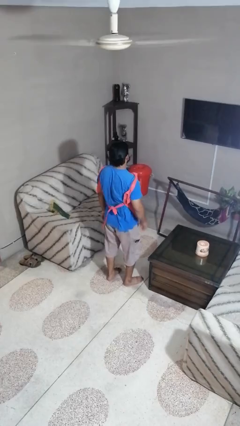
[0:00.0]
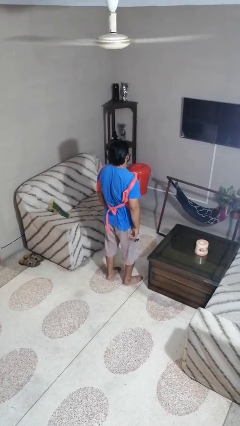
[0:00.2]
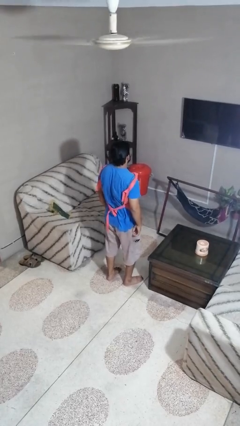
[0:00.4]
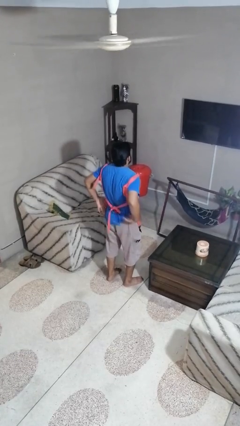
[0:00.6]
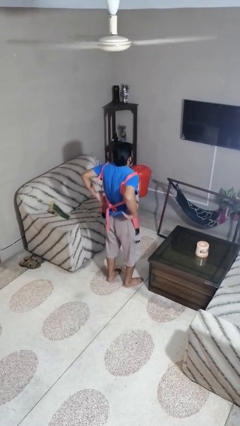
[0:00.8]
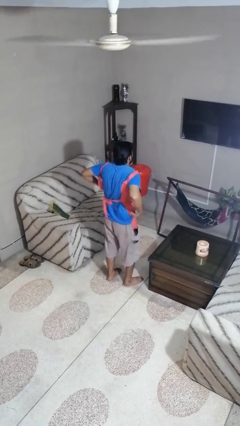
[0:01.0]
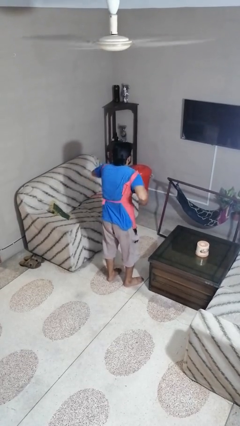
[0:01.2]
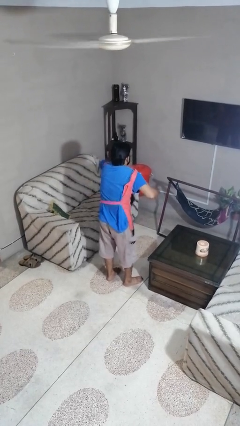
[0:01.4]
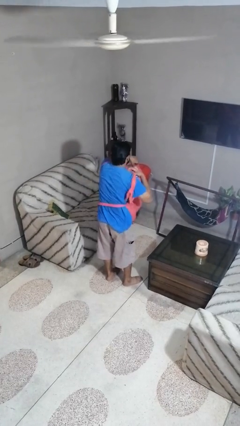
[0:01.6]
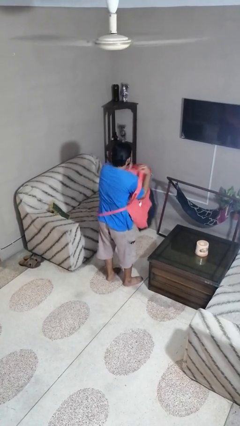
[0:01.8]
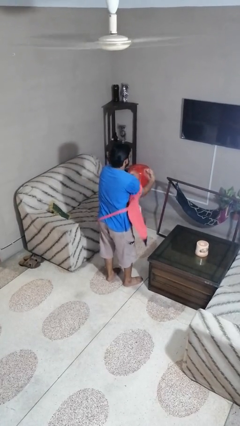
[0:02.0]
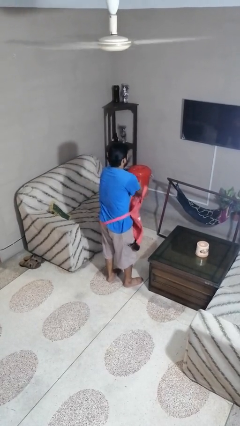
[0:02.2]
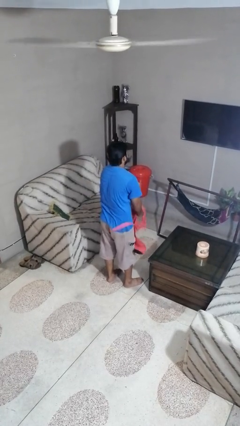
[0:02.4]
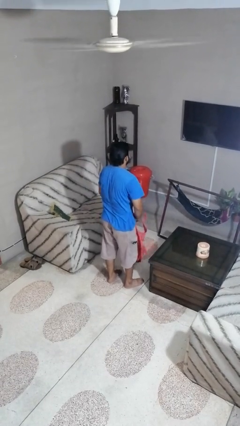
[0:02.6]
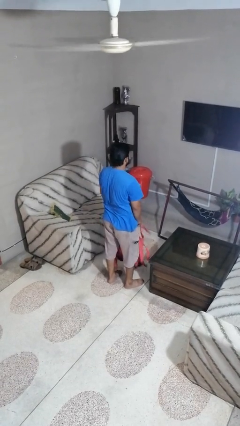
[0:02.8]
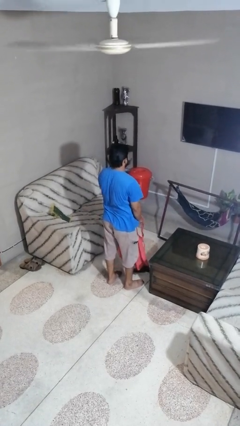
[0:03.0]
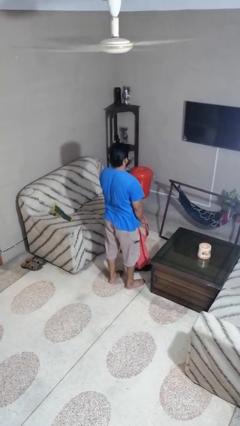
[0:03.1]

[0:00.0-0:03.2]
person takes off apron

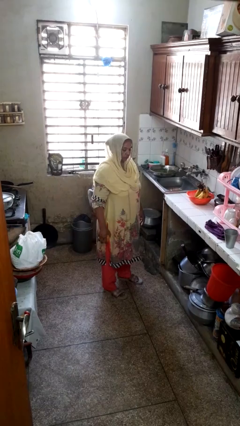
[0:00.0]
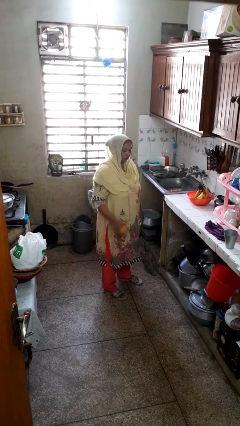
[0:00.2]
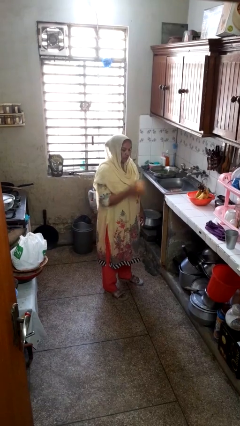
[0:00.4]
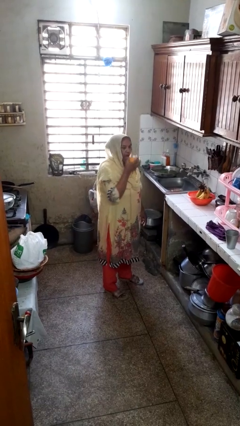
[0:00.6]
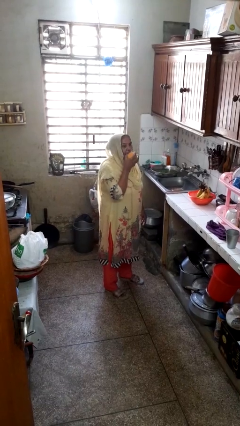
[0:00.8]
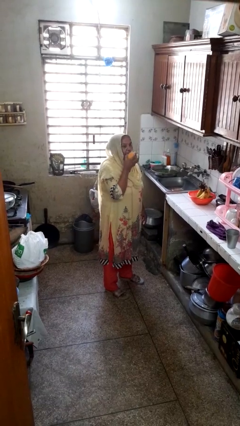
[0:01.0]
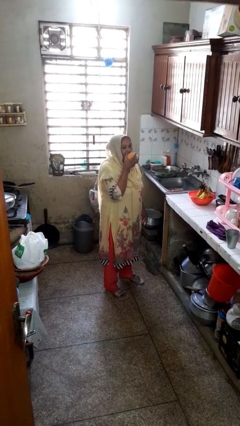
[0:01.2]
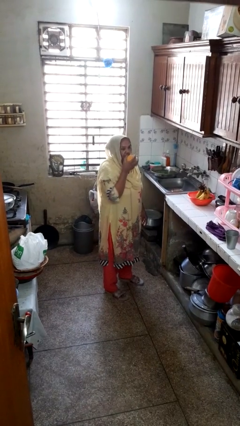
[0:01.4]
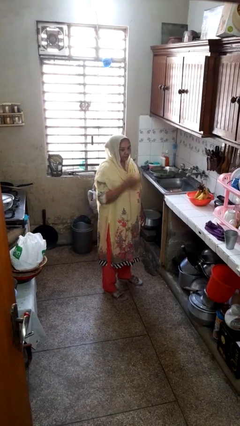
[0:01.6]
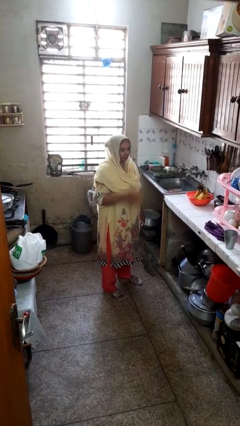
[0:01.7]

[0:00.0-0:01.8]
person eats apple

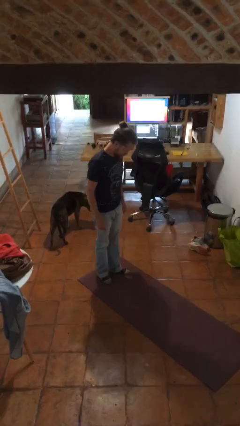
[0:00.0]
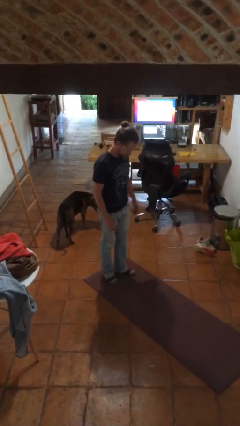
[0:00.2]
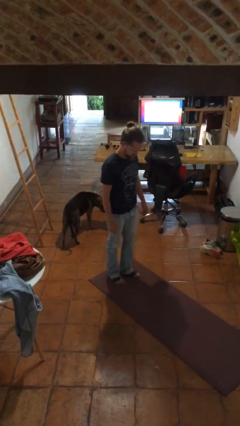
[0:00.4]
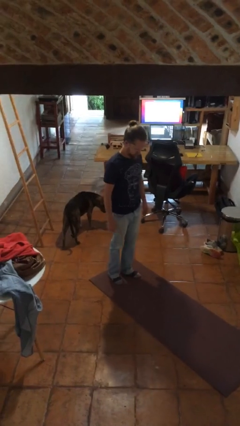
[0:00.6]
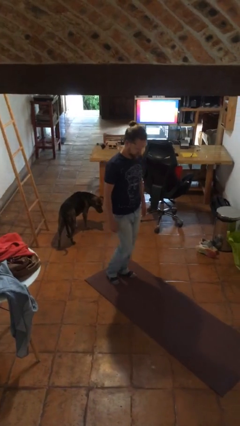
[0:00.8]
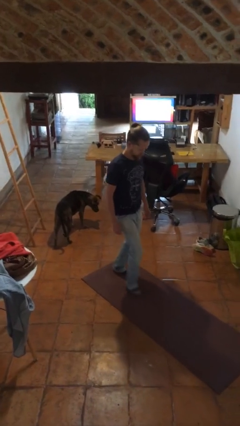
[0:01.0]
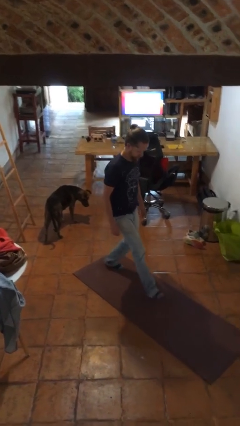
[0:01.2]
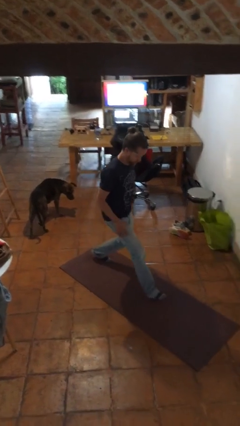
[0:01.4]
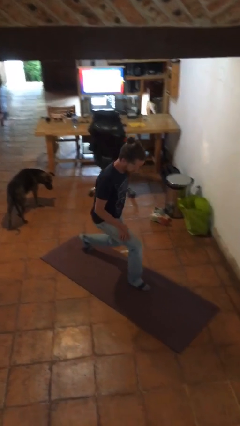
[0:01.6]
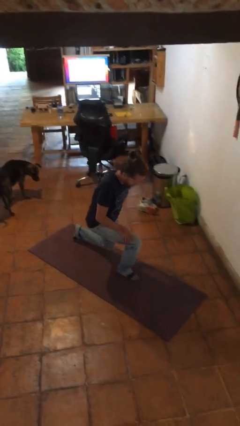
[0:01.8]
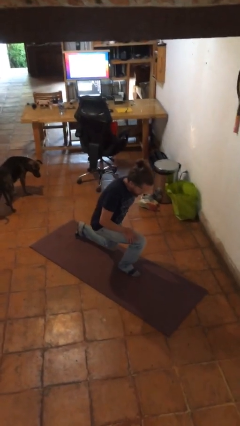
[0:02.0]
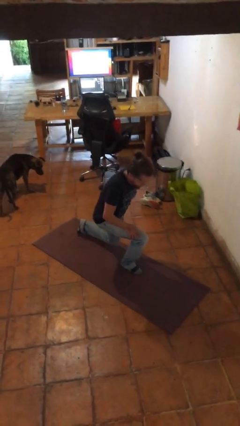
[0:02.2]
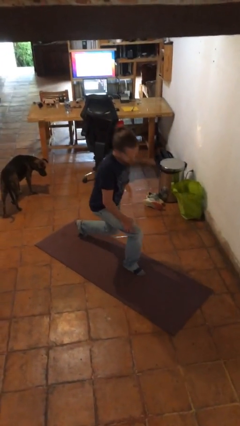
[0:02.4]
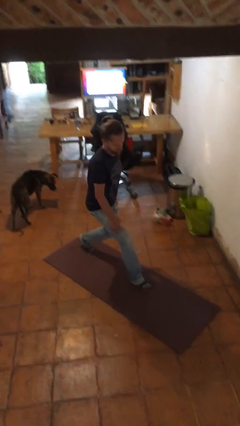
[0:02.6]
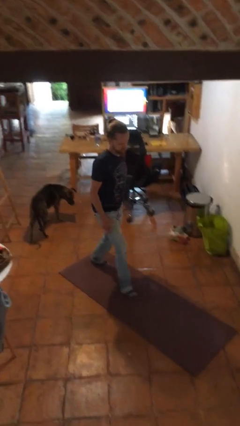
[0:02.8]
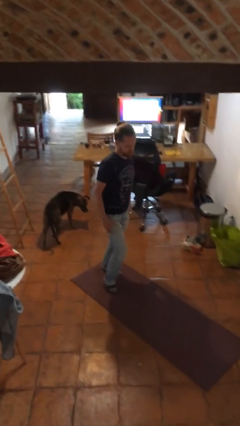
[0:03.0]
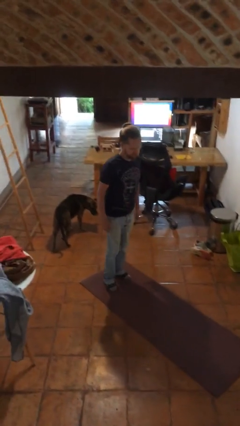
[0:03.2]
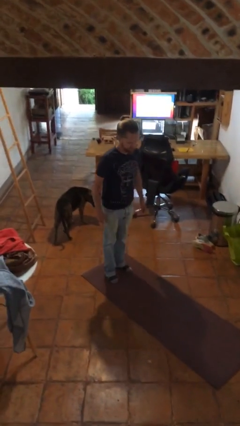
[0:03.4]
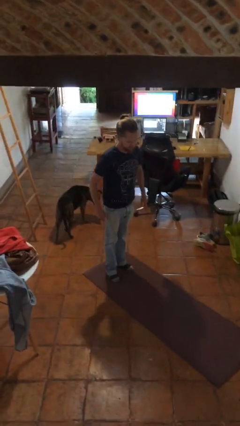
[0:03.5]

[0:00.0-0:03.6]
person exercises with lunges

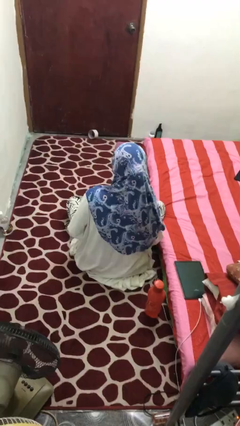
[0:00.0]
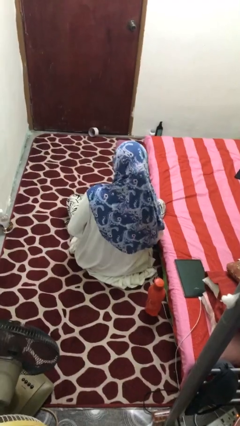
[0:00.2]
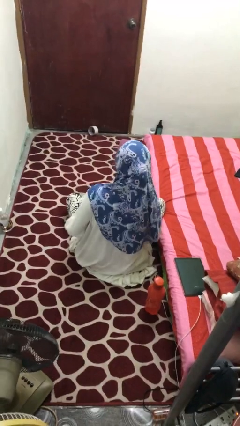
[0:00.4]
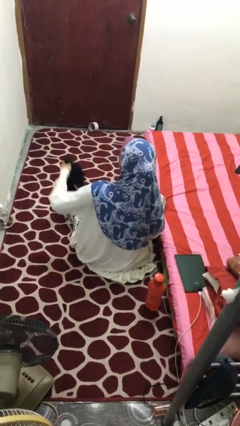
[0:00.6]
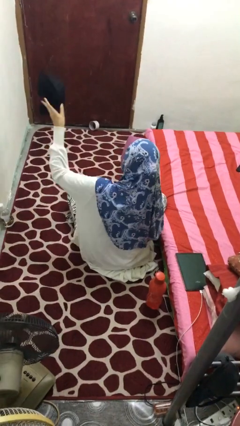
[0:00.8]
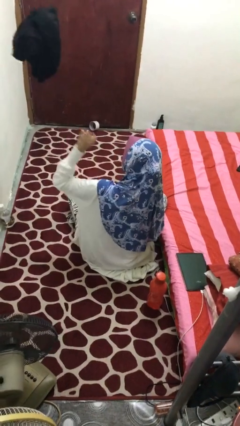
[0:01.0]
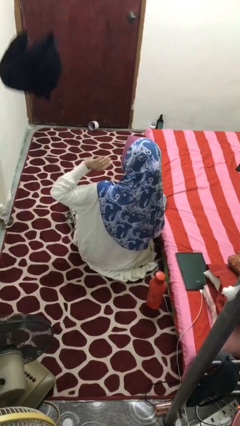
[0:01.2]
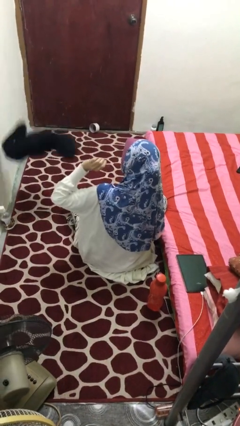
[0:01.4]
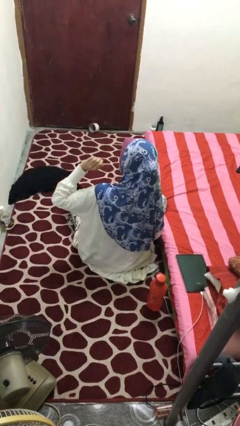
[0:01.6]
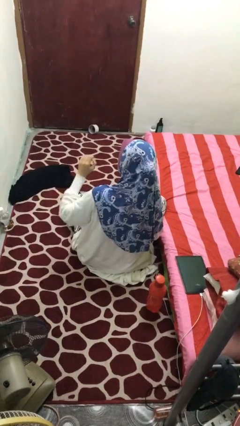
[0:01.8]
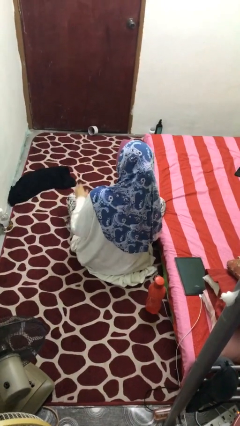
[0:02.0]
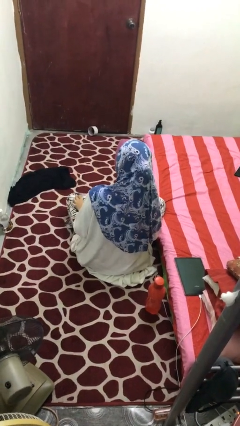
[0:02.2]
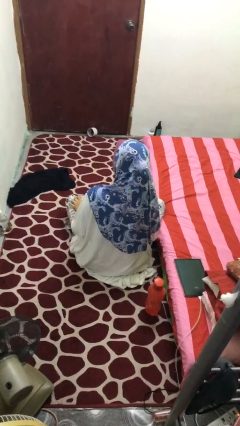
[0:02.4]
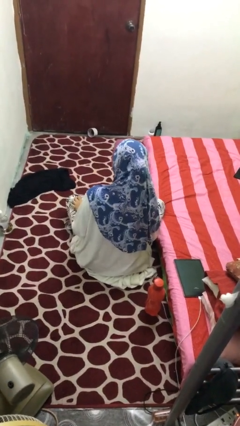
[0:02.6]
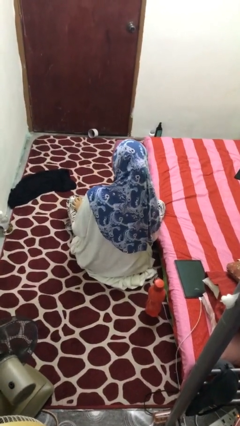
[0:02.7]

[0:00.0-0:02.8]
person throws object into air

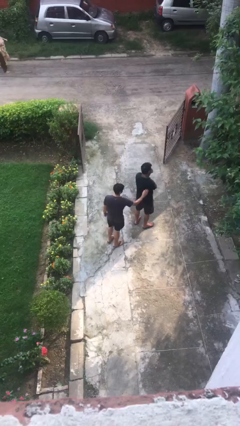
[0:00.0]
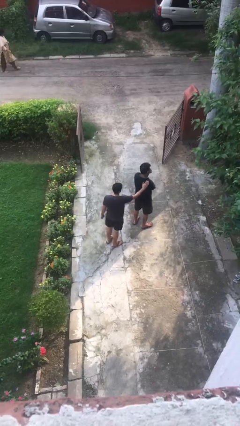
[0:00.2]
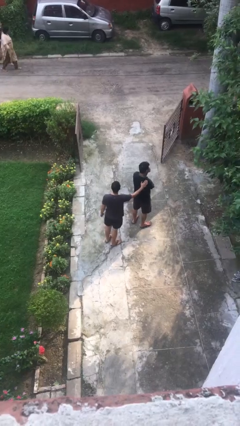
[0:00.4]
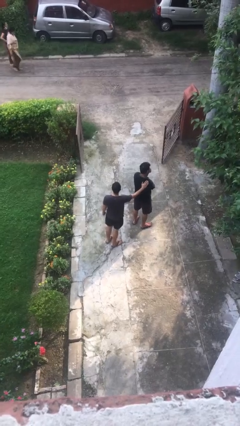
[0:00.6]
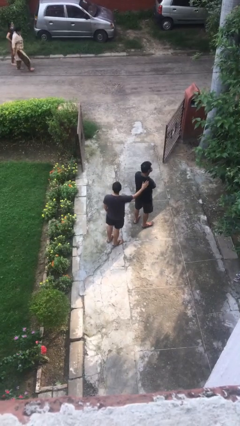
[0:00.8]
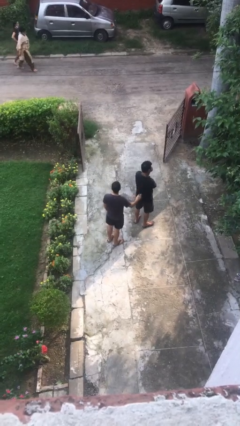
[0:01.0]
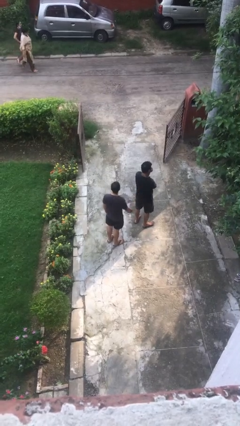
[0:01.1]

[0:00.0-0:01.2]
person touches back of person

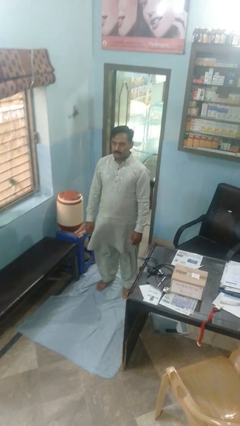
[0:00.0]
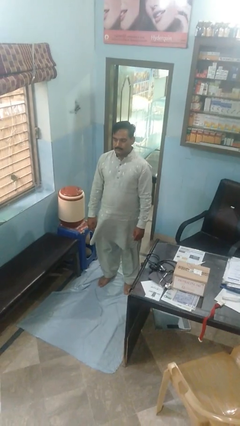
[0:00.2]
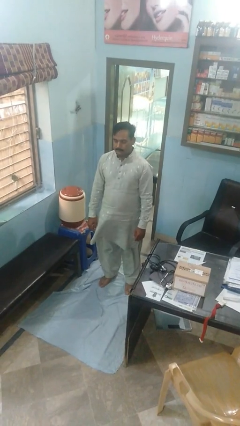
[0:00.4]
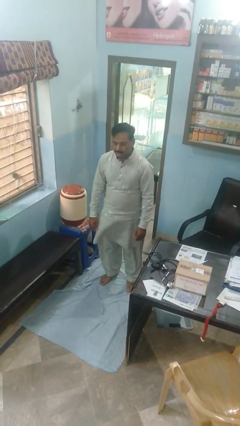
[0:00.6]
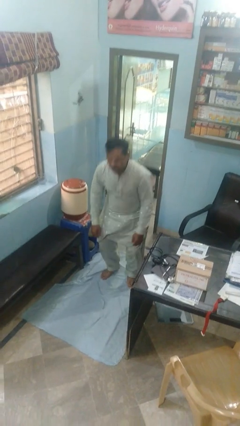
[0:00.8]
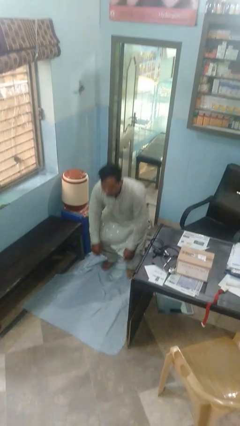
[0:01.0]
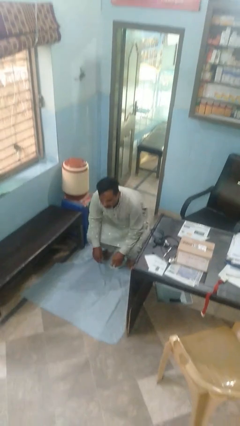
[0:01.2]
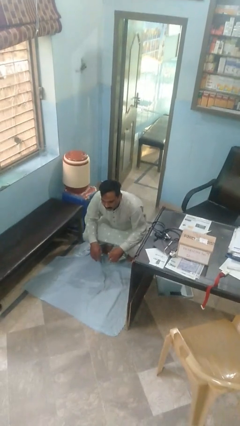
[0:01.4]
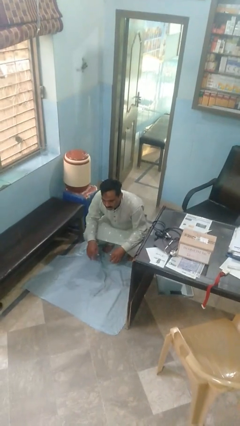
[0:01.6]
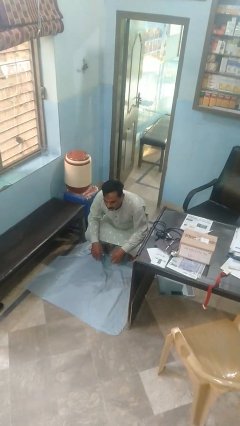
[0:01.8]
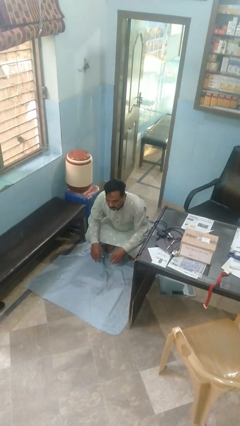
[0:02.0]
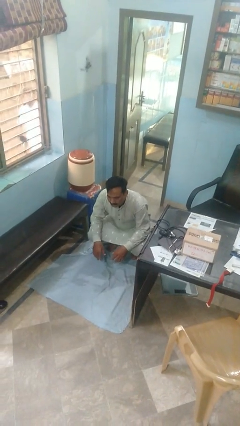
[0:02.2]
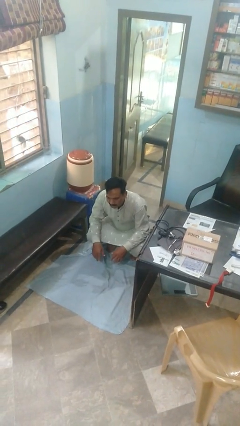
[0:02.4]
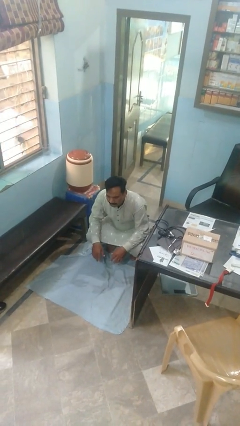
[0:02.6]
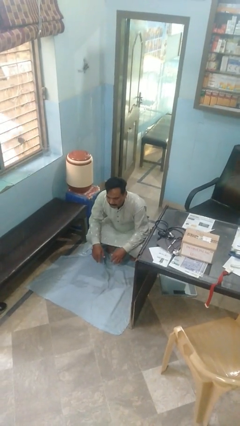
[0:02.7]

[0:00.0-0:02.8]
person squats

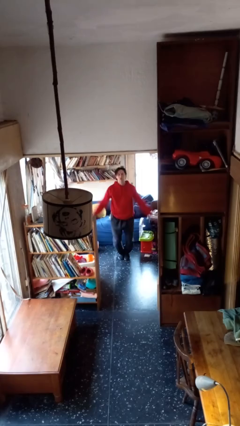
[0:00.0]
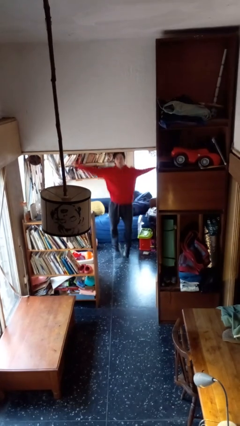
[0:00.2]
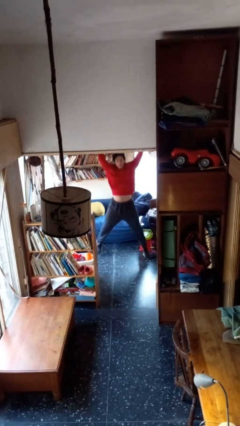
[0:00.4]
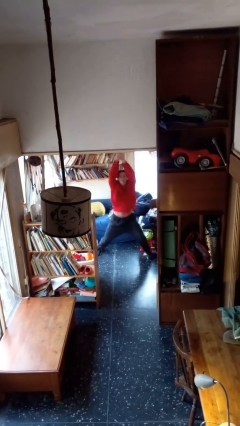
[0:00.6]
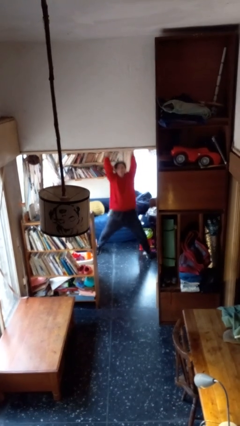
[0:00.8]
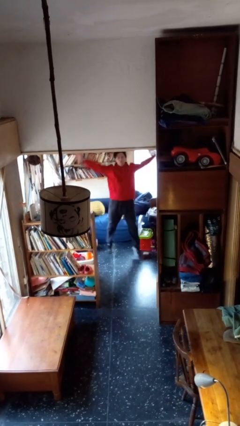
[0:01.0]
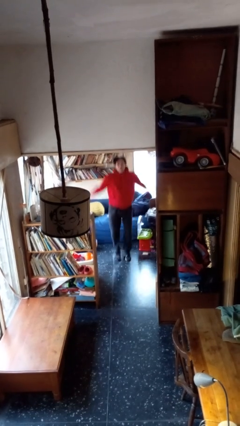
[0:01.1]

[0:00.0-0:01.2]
person exercises with jumping jacks

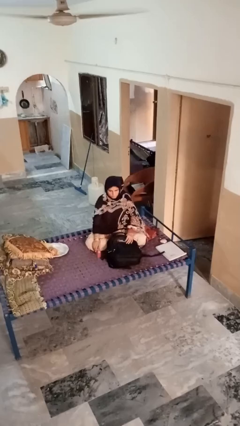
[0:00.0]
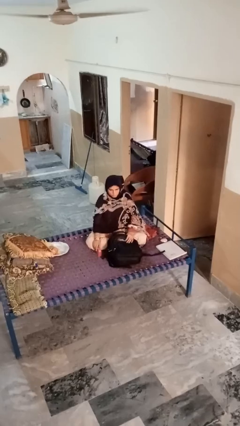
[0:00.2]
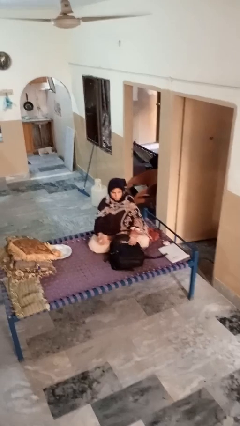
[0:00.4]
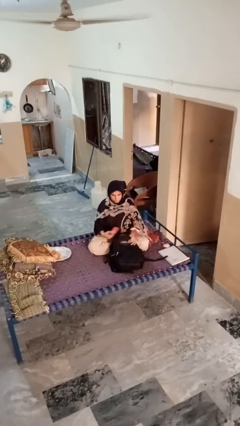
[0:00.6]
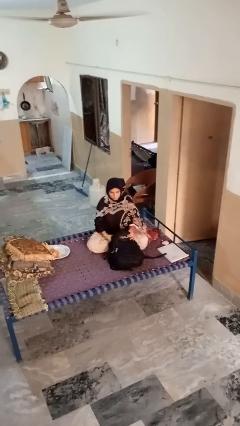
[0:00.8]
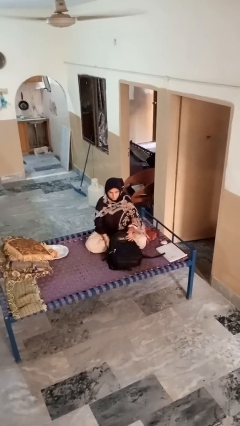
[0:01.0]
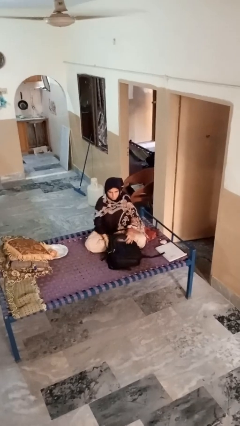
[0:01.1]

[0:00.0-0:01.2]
person puts object into bag
